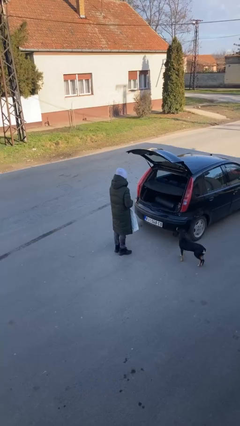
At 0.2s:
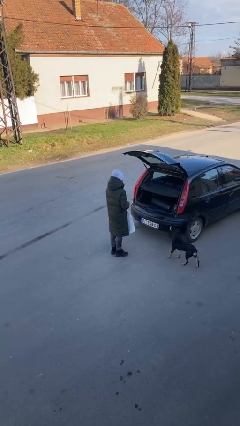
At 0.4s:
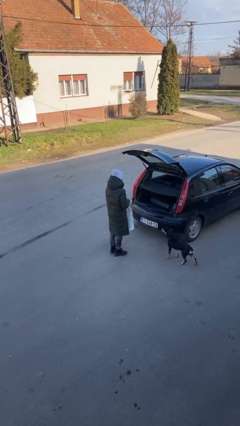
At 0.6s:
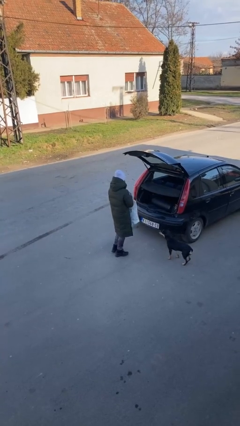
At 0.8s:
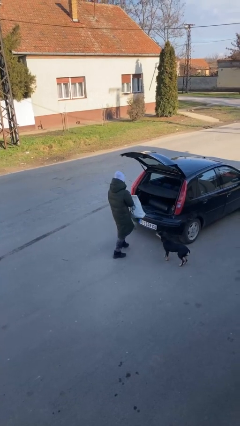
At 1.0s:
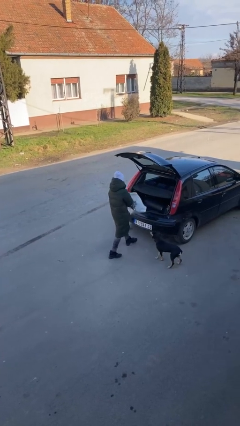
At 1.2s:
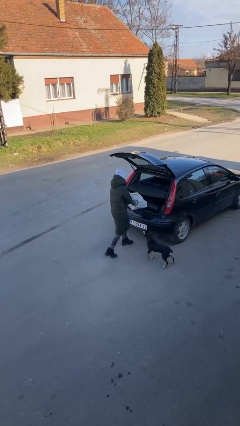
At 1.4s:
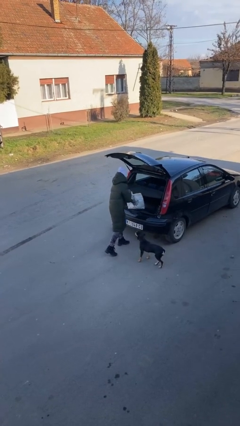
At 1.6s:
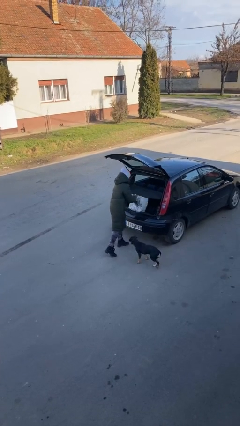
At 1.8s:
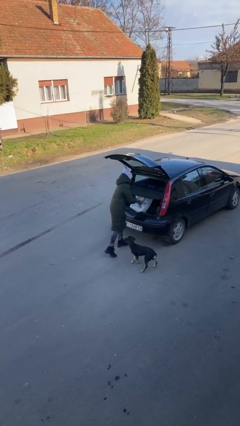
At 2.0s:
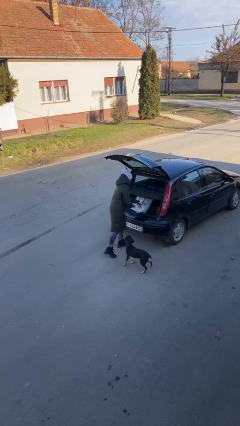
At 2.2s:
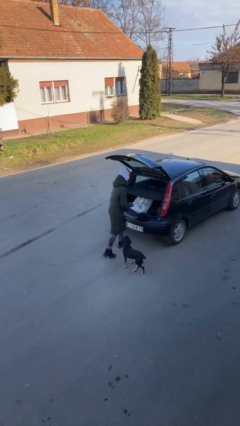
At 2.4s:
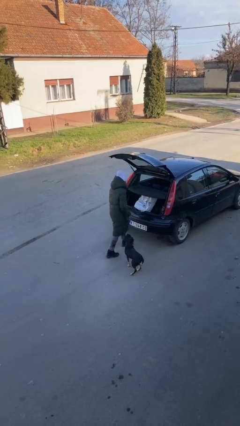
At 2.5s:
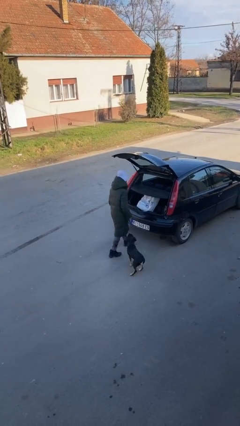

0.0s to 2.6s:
person loads car

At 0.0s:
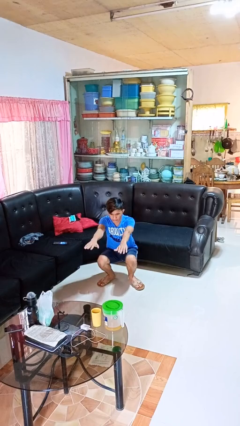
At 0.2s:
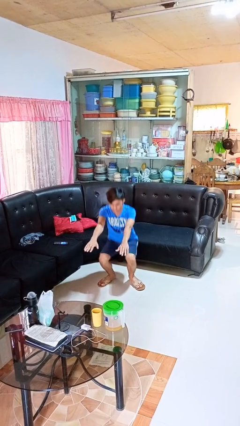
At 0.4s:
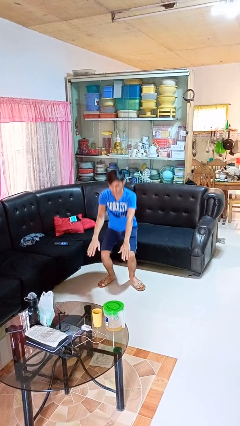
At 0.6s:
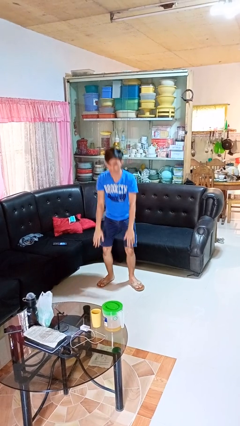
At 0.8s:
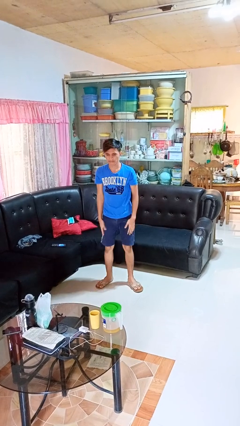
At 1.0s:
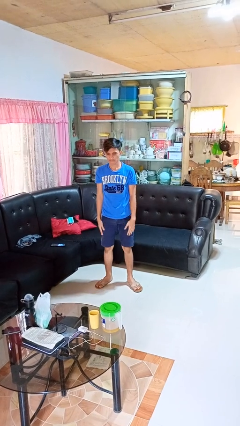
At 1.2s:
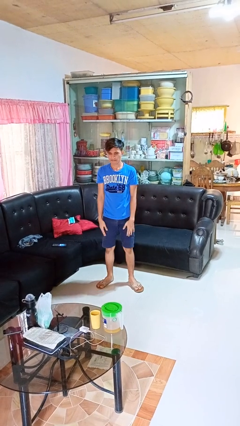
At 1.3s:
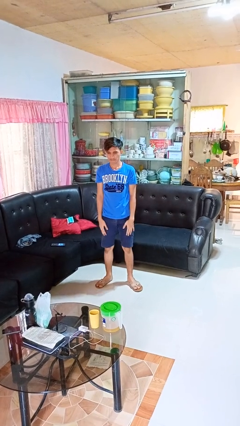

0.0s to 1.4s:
person stands up

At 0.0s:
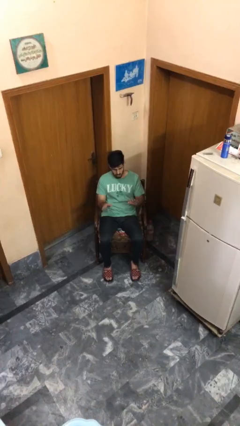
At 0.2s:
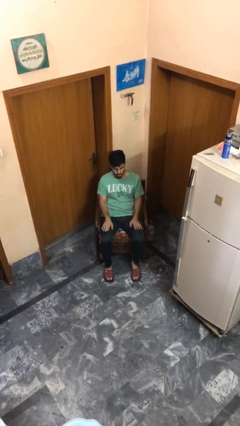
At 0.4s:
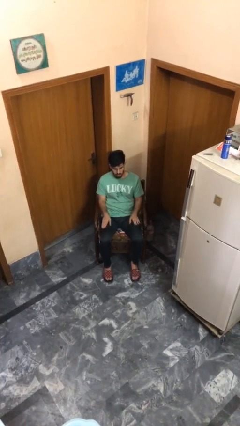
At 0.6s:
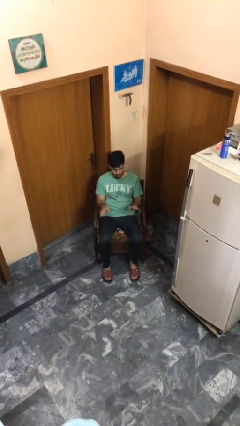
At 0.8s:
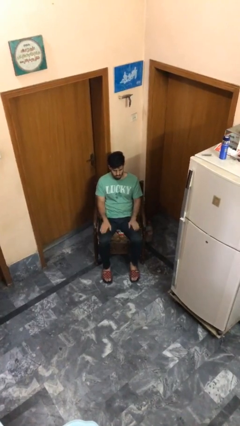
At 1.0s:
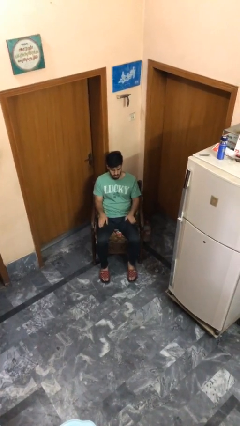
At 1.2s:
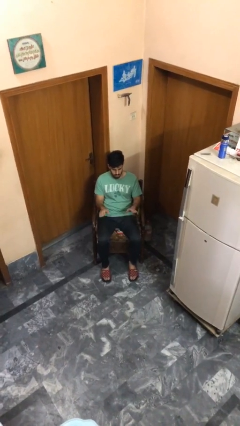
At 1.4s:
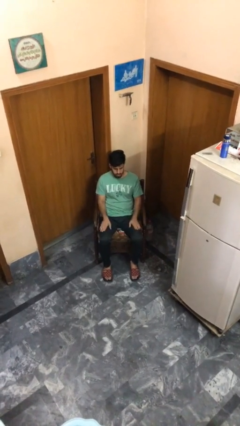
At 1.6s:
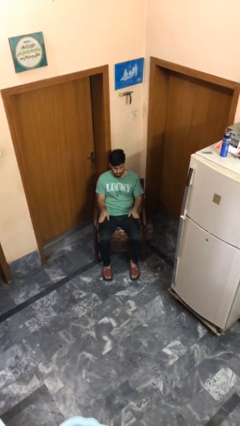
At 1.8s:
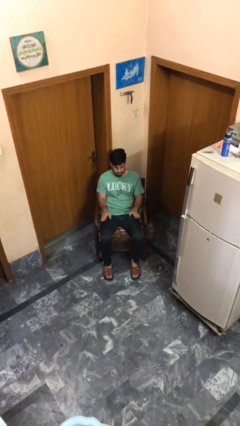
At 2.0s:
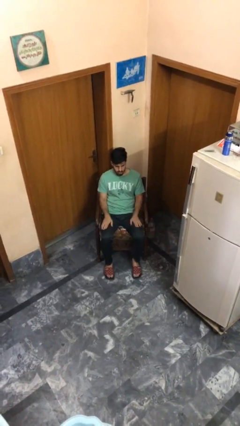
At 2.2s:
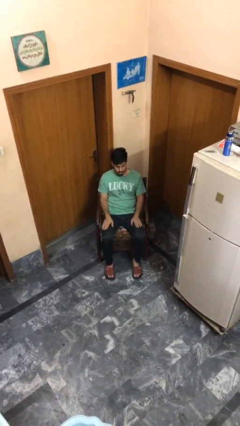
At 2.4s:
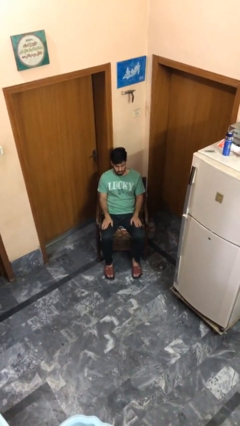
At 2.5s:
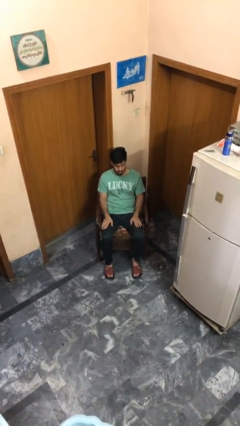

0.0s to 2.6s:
person slaps hands on thighs

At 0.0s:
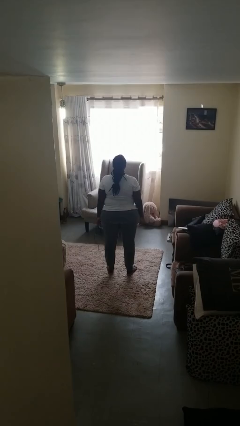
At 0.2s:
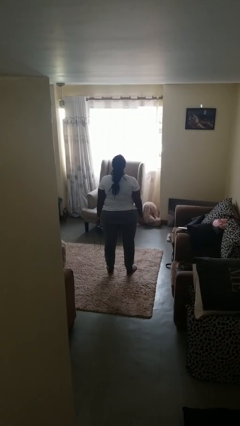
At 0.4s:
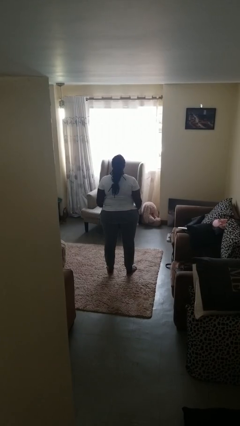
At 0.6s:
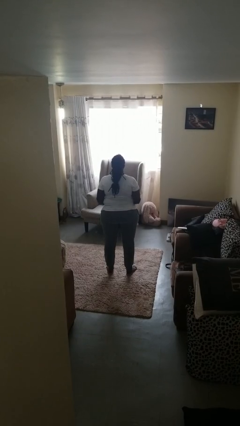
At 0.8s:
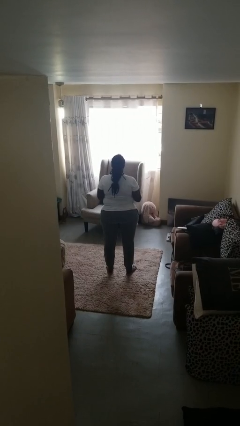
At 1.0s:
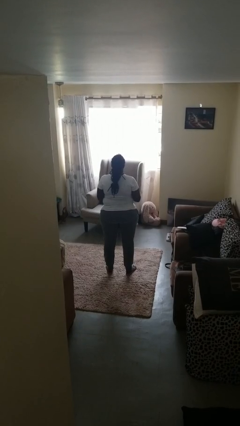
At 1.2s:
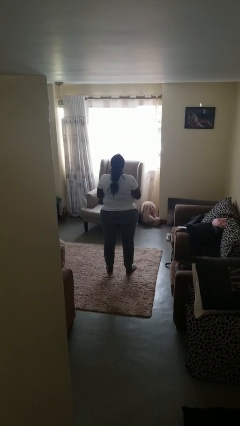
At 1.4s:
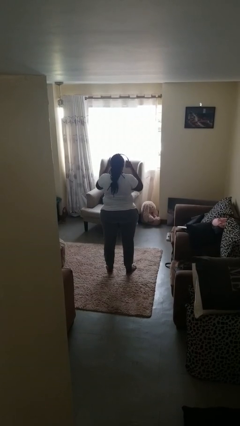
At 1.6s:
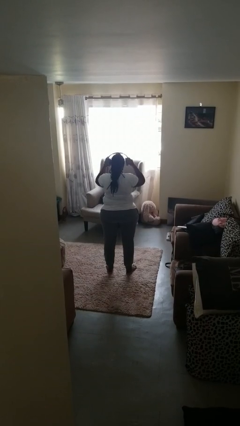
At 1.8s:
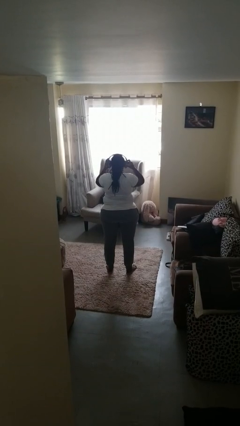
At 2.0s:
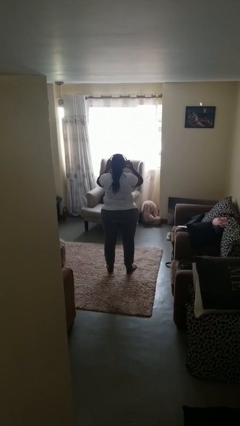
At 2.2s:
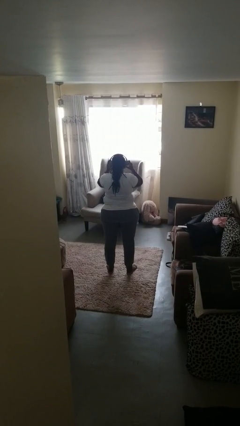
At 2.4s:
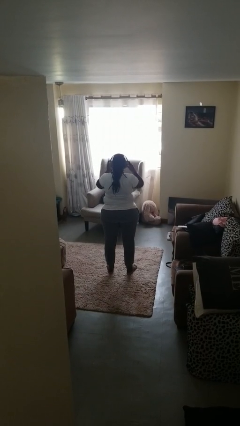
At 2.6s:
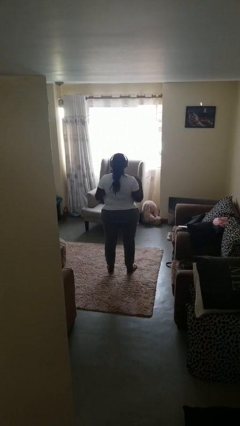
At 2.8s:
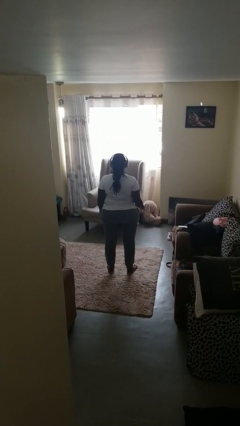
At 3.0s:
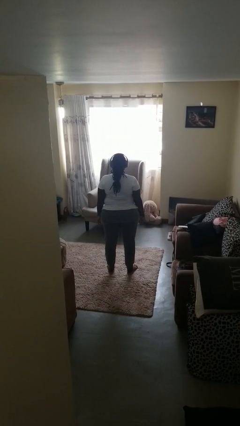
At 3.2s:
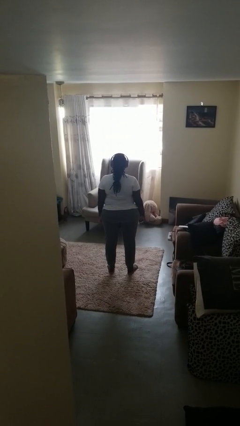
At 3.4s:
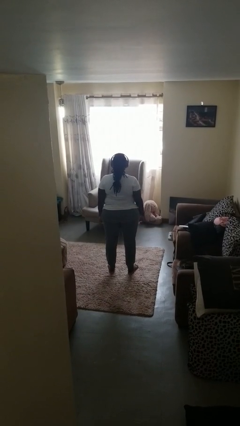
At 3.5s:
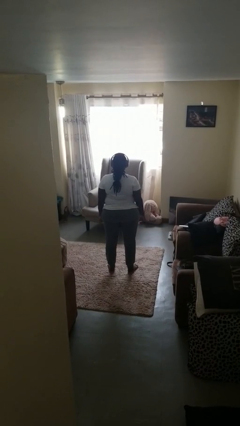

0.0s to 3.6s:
person puts on headphones

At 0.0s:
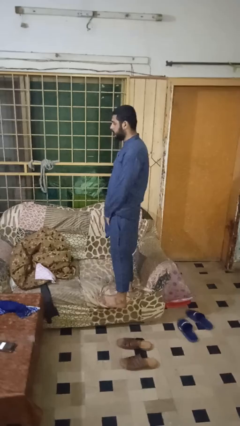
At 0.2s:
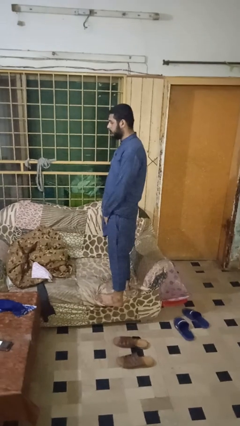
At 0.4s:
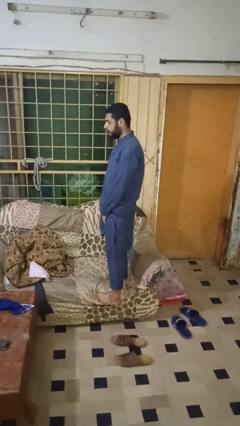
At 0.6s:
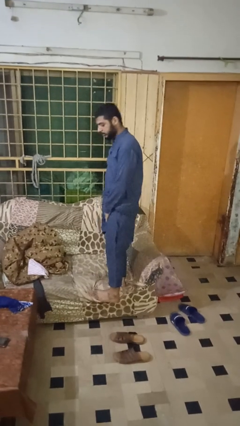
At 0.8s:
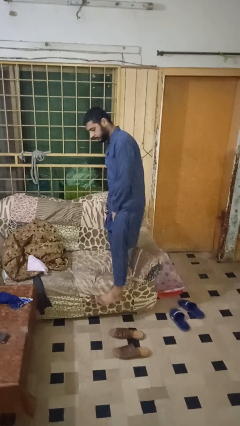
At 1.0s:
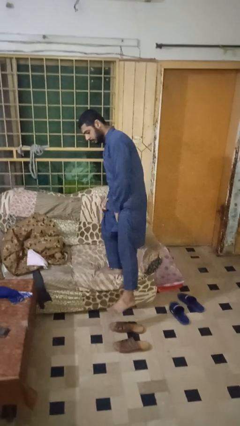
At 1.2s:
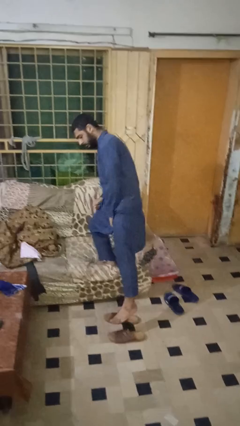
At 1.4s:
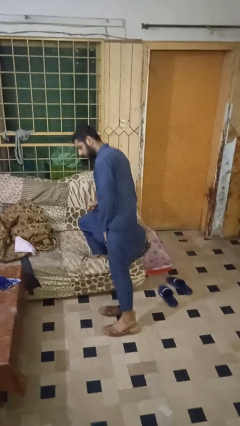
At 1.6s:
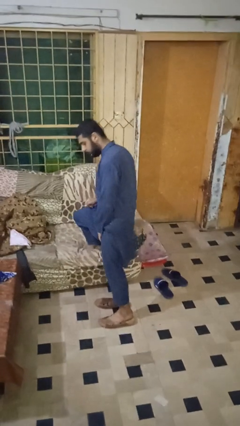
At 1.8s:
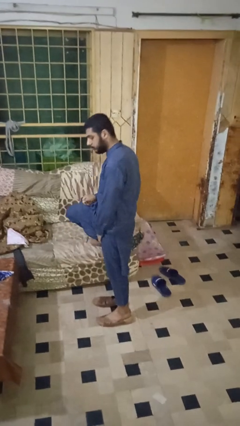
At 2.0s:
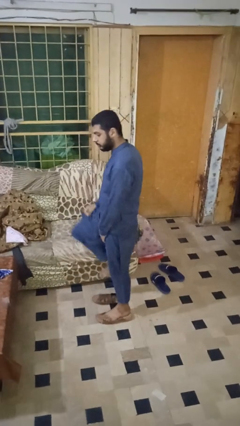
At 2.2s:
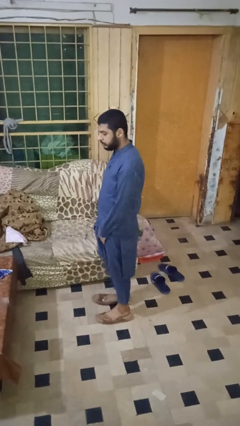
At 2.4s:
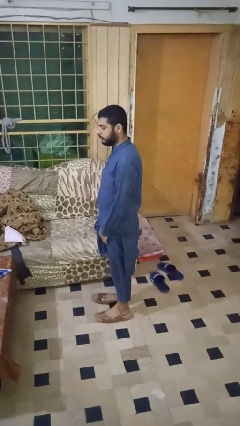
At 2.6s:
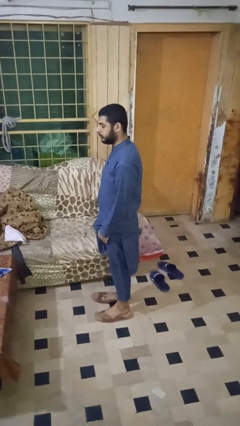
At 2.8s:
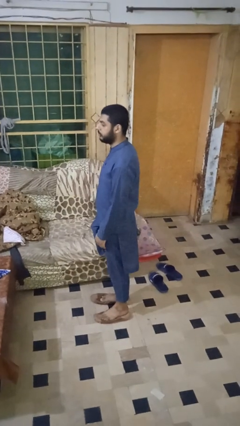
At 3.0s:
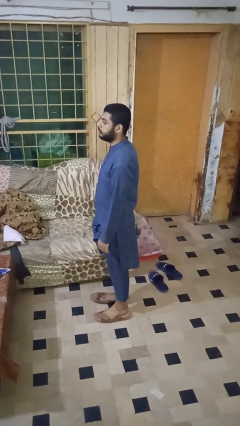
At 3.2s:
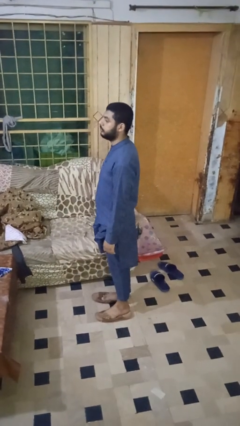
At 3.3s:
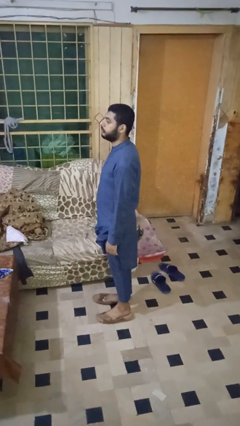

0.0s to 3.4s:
person climbs off couch

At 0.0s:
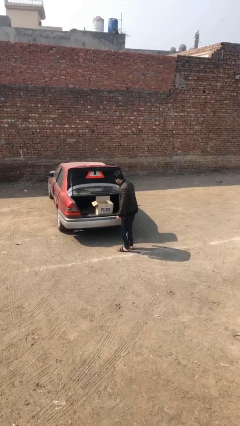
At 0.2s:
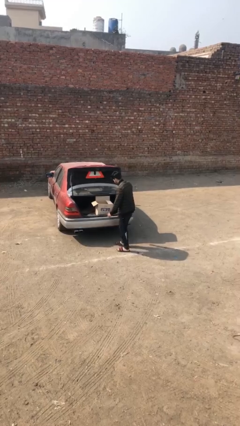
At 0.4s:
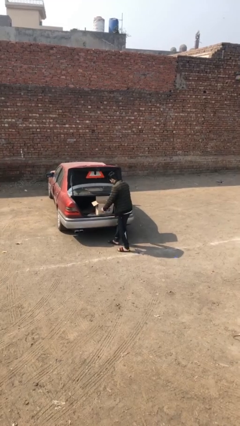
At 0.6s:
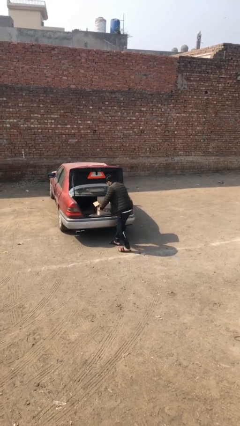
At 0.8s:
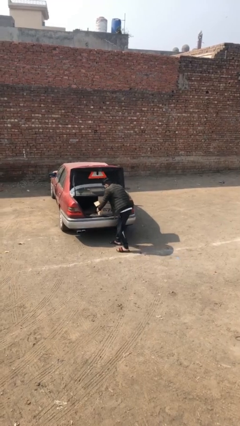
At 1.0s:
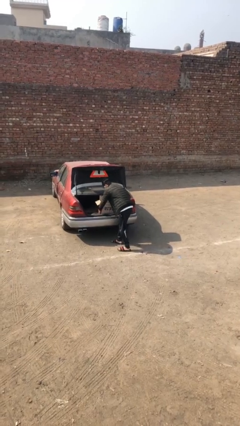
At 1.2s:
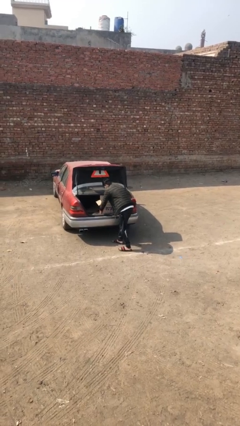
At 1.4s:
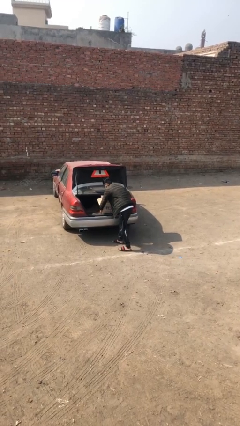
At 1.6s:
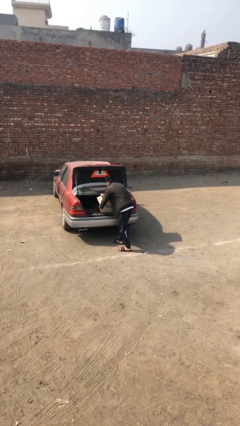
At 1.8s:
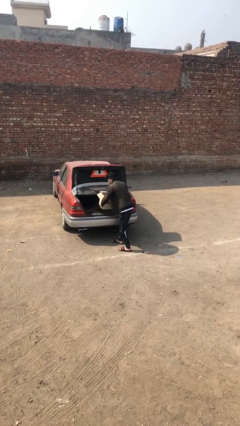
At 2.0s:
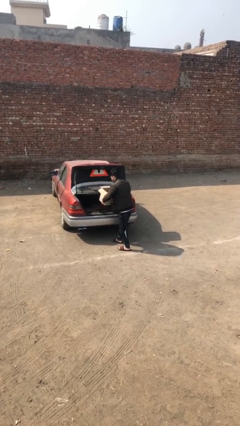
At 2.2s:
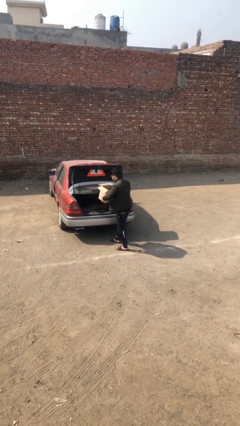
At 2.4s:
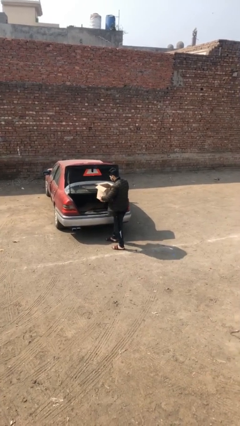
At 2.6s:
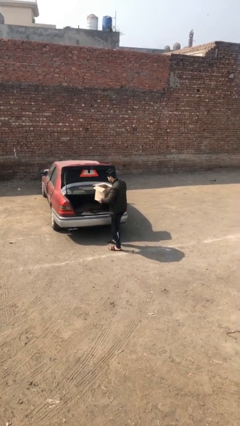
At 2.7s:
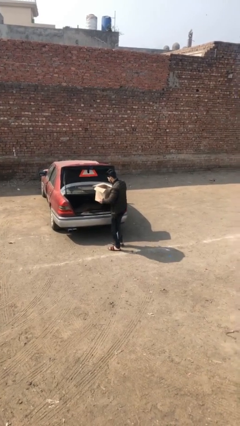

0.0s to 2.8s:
person unloads car

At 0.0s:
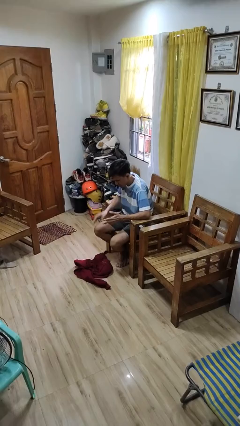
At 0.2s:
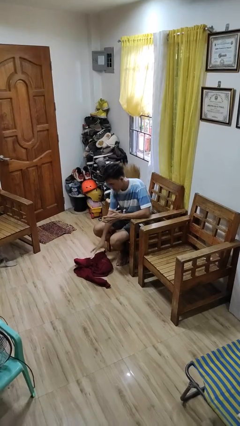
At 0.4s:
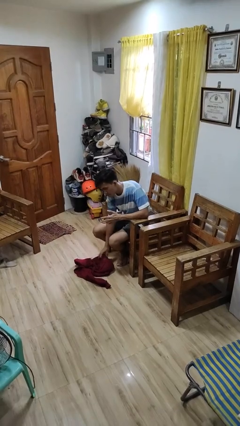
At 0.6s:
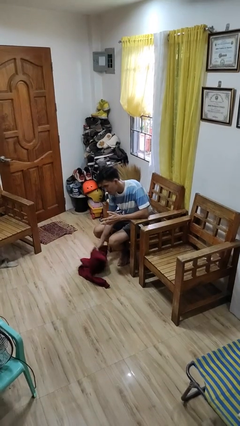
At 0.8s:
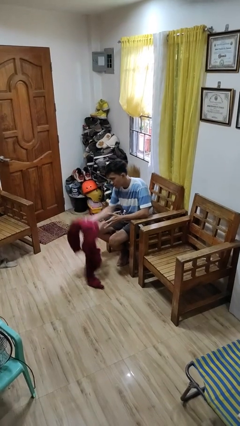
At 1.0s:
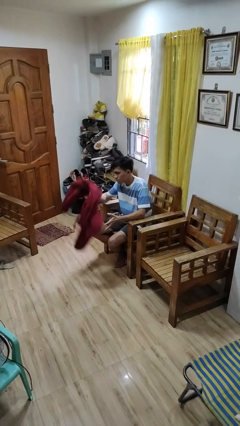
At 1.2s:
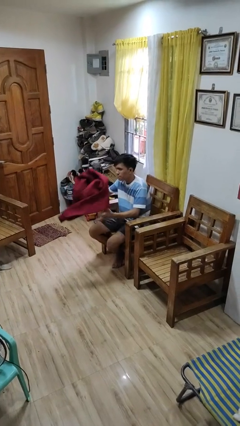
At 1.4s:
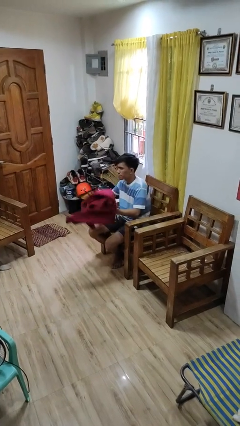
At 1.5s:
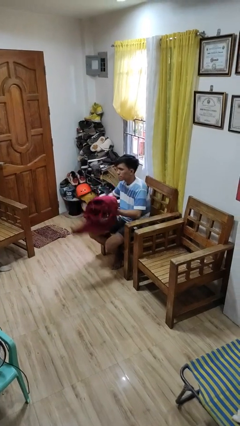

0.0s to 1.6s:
person picks up object from floor
